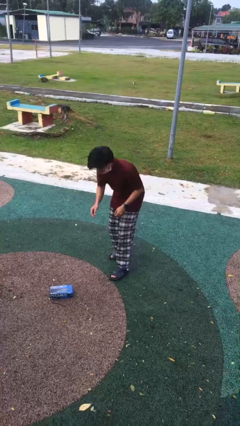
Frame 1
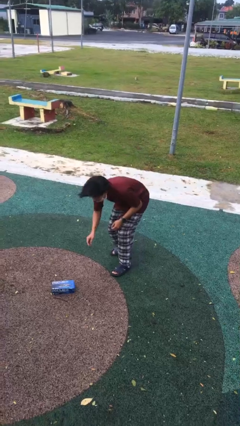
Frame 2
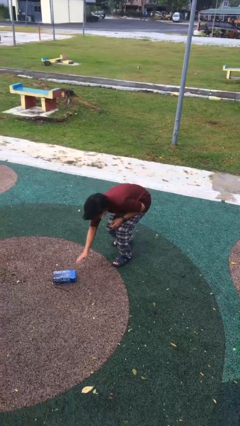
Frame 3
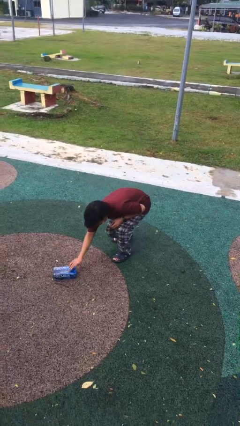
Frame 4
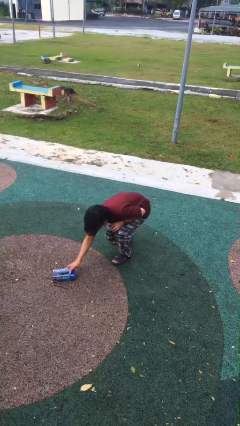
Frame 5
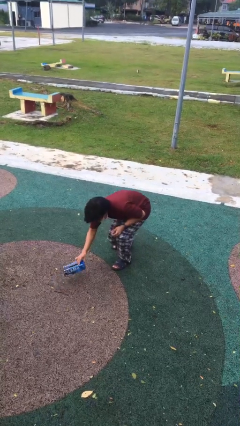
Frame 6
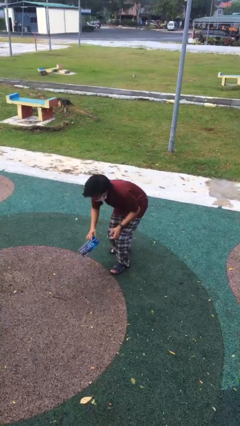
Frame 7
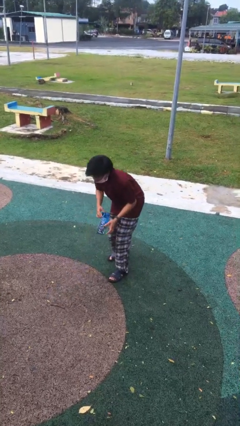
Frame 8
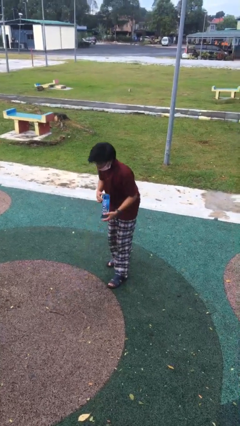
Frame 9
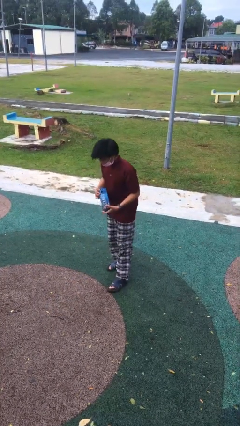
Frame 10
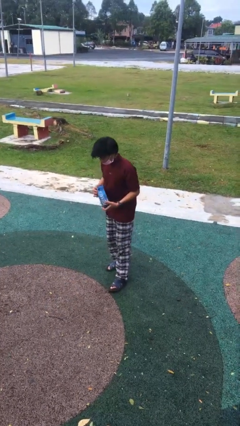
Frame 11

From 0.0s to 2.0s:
person picks up object from floor

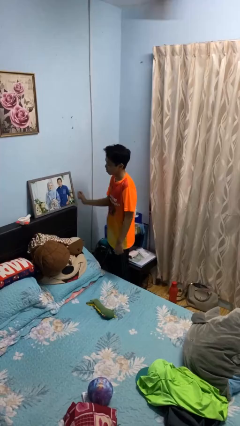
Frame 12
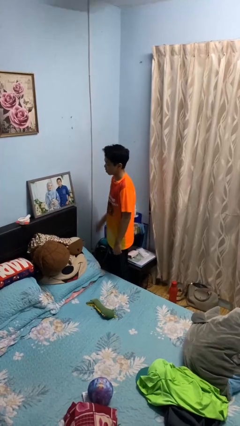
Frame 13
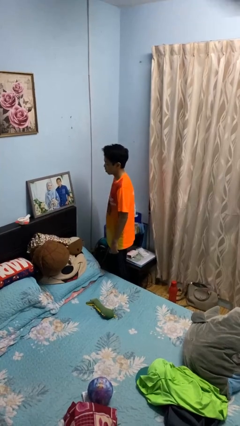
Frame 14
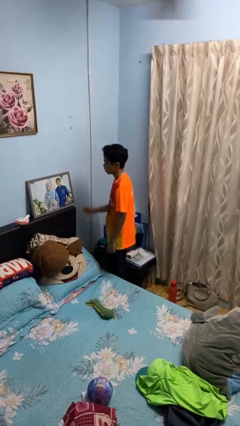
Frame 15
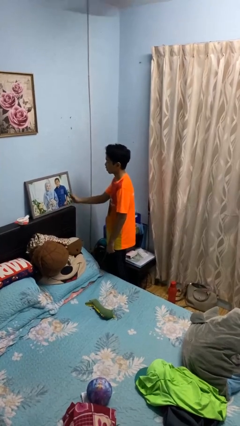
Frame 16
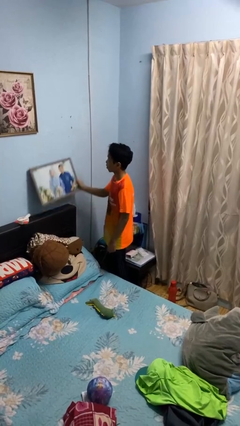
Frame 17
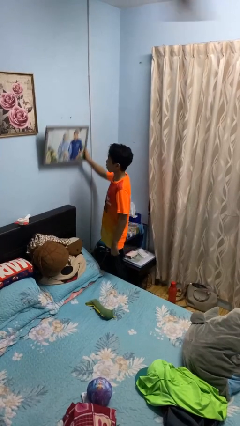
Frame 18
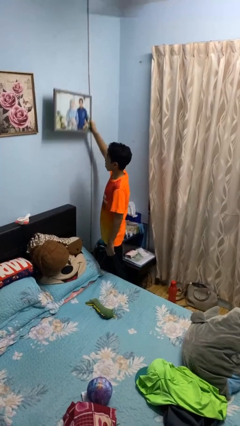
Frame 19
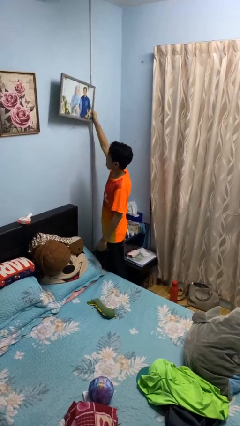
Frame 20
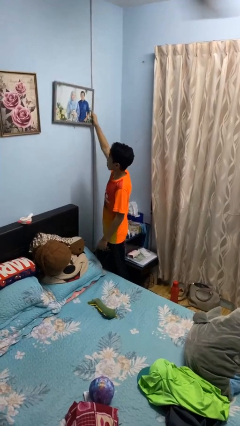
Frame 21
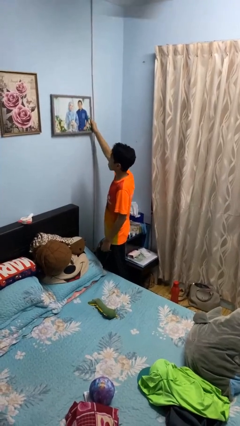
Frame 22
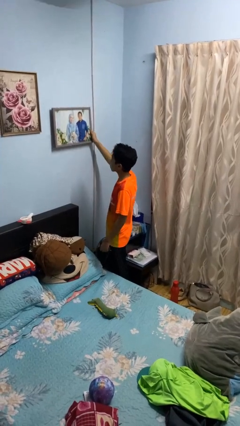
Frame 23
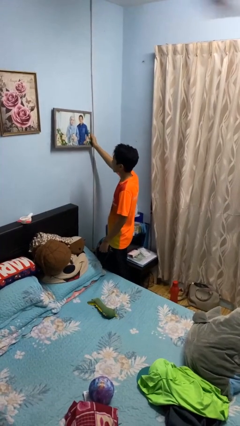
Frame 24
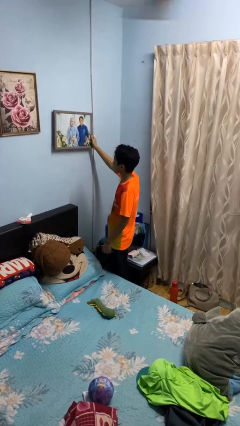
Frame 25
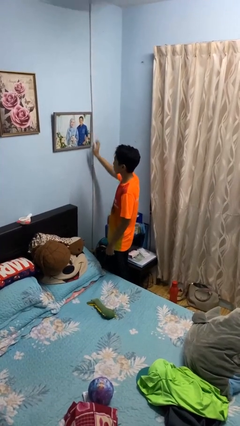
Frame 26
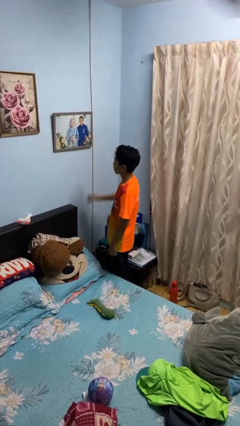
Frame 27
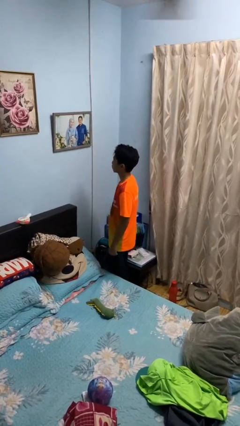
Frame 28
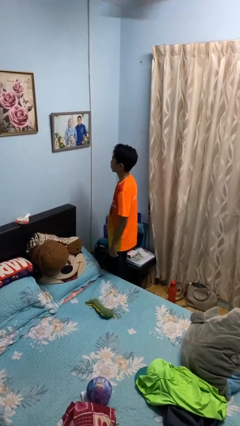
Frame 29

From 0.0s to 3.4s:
person puts up picture frame

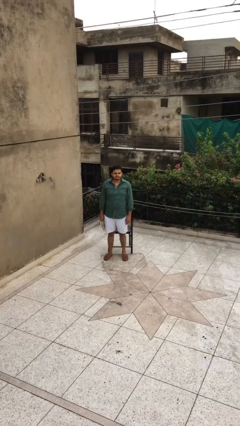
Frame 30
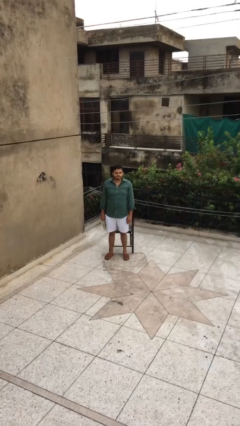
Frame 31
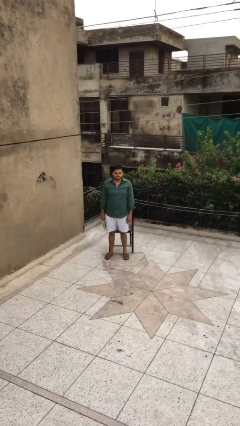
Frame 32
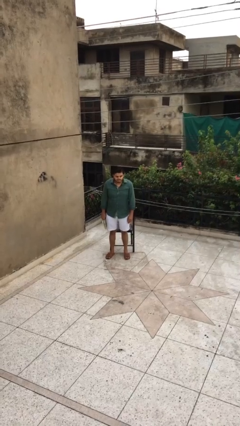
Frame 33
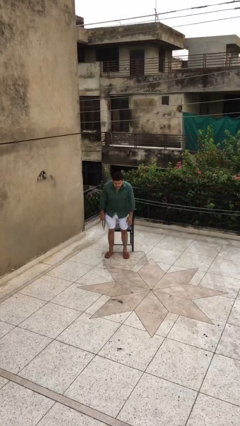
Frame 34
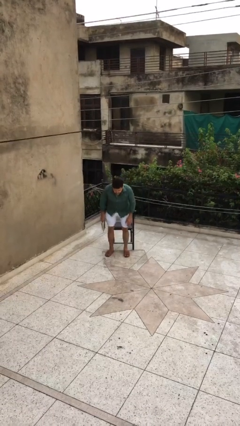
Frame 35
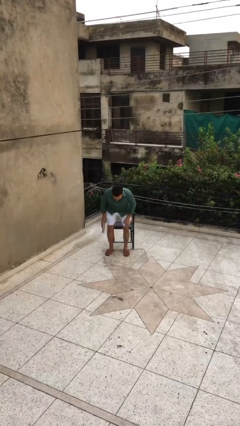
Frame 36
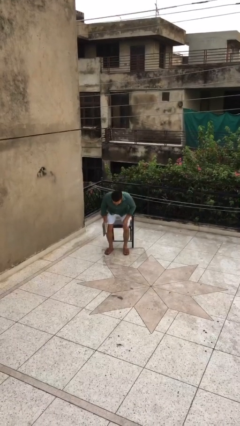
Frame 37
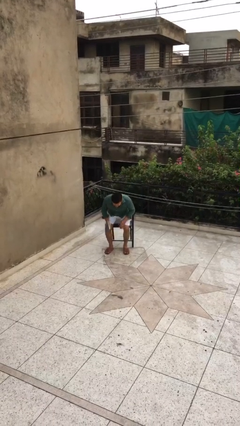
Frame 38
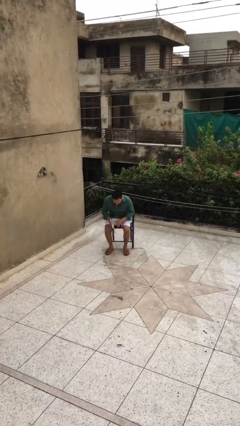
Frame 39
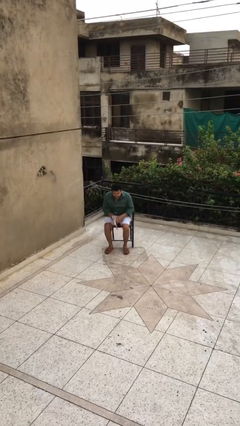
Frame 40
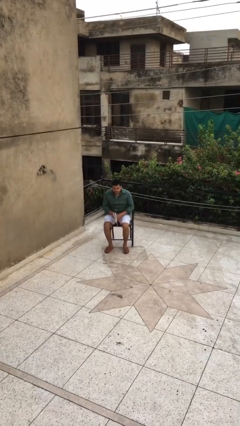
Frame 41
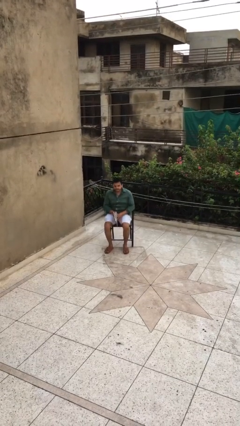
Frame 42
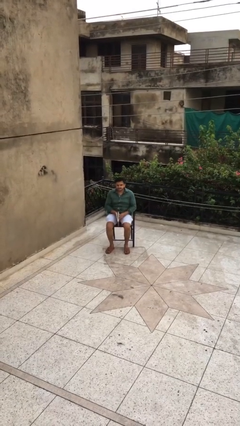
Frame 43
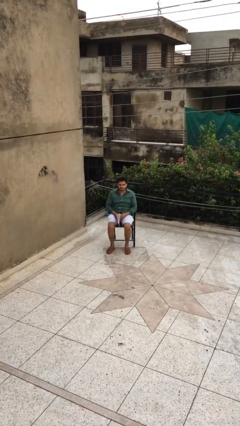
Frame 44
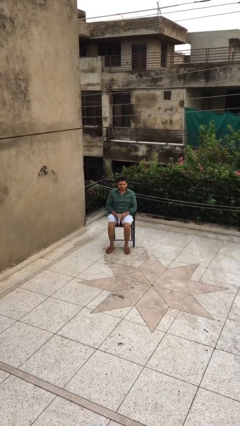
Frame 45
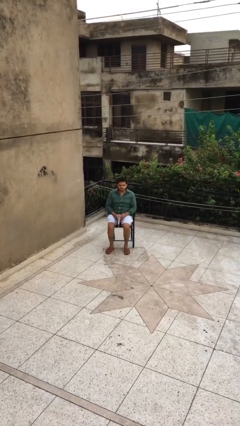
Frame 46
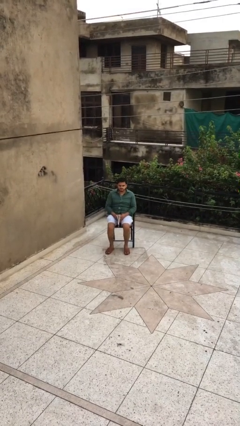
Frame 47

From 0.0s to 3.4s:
person sits down

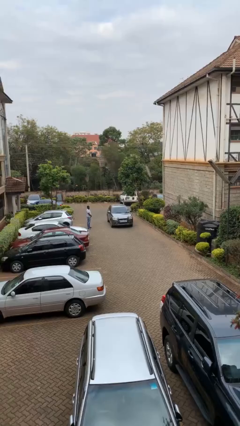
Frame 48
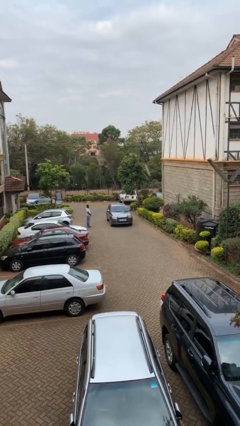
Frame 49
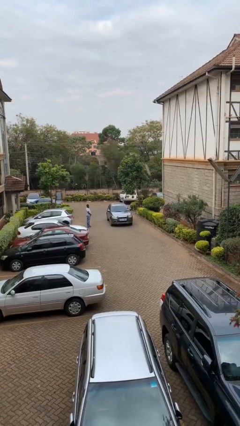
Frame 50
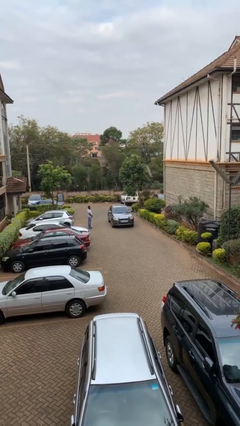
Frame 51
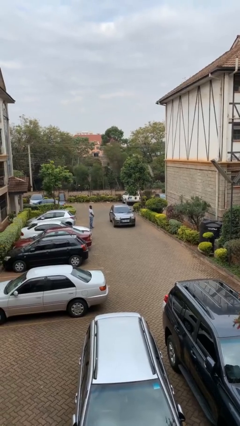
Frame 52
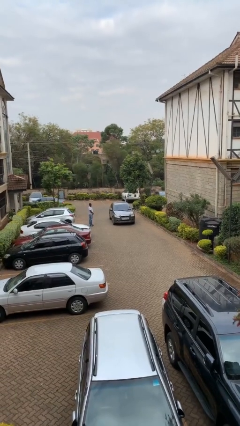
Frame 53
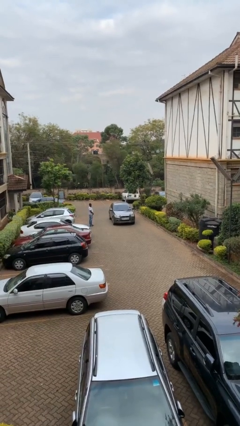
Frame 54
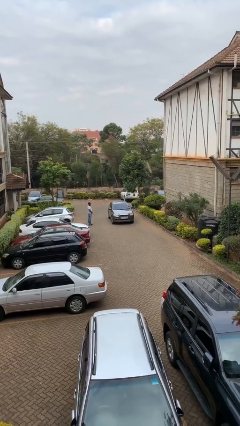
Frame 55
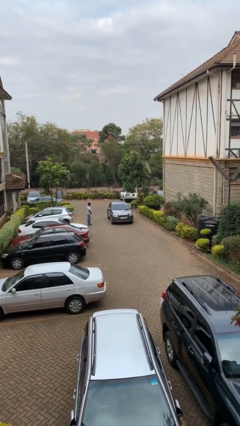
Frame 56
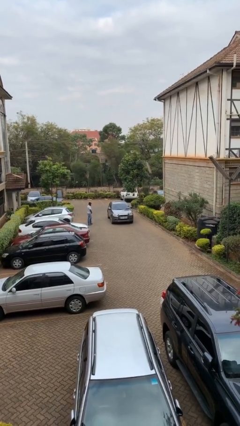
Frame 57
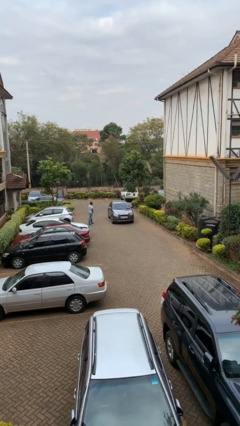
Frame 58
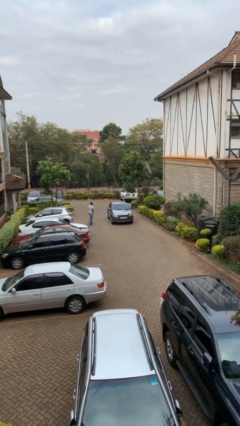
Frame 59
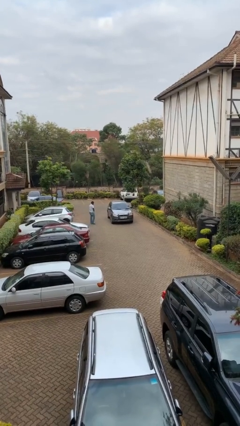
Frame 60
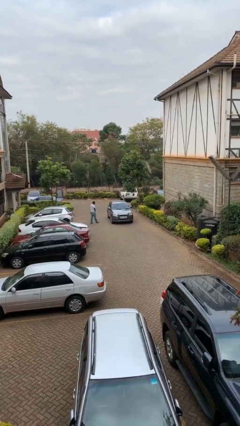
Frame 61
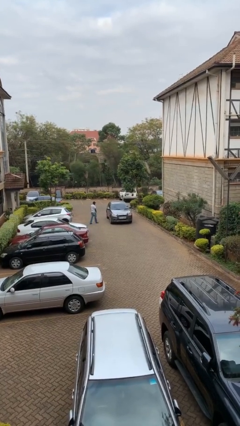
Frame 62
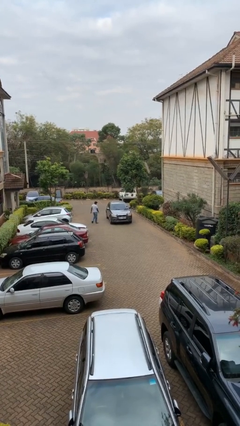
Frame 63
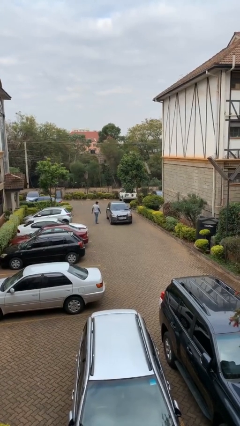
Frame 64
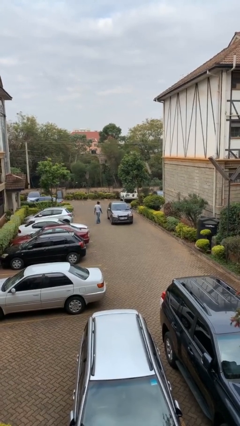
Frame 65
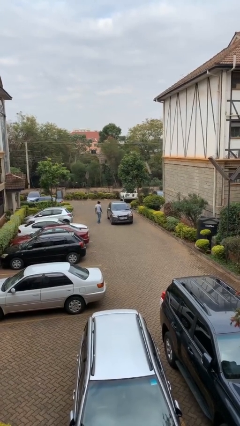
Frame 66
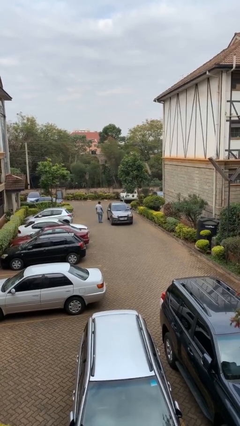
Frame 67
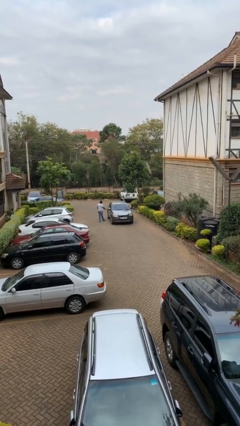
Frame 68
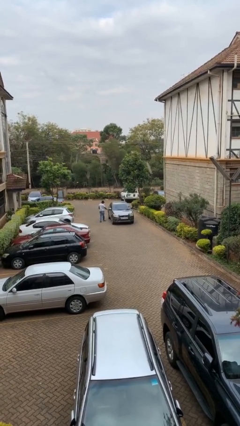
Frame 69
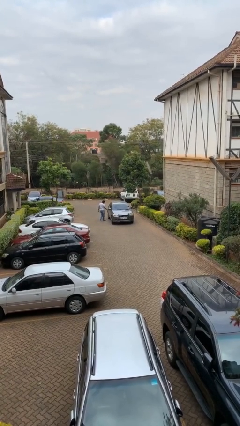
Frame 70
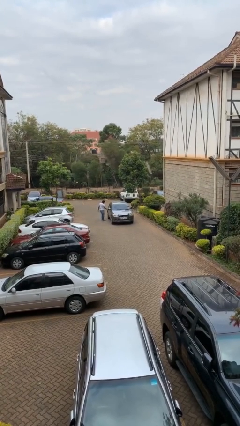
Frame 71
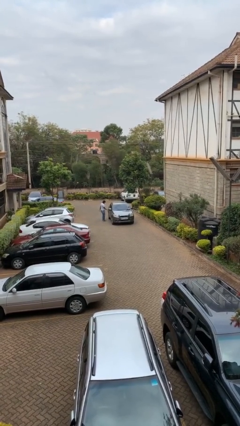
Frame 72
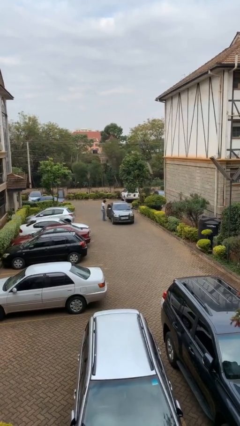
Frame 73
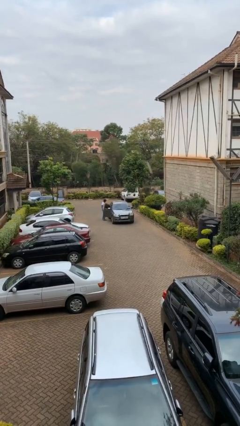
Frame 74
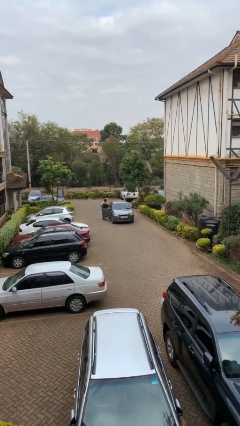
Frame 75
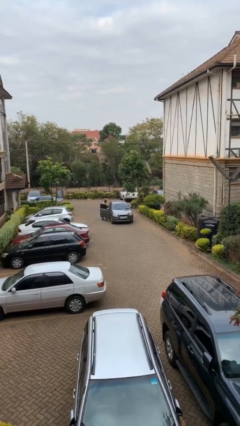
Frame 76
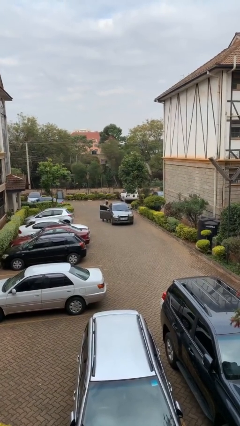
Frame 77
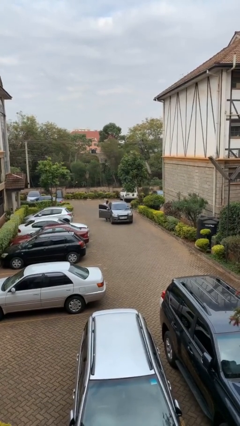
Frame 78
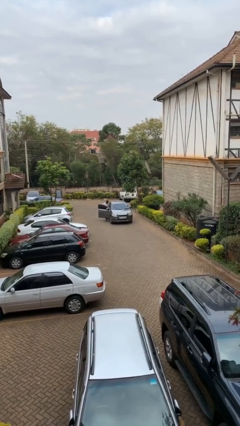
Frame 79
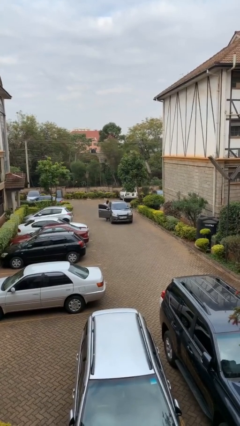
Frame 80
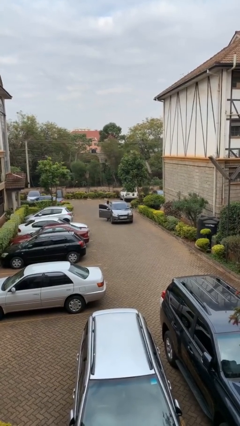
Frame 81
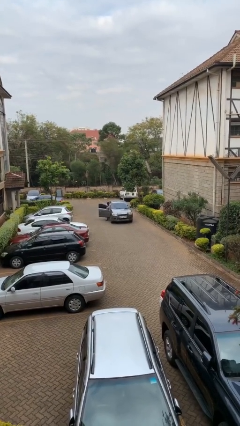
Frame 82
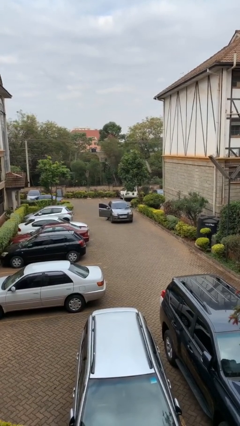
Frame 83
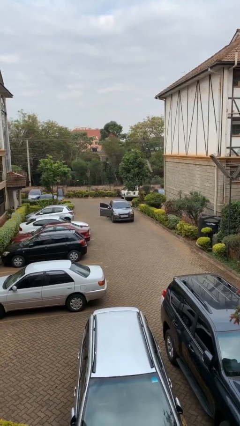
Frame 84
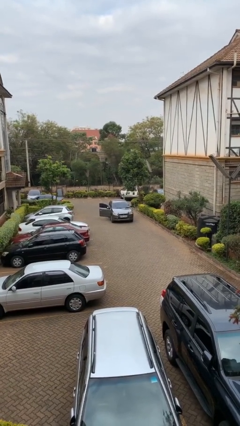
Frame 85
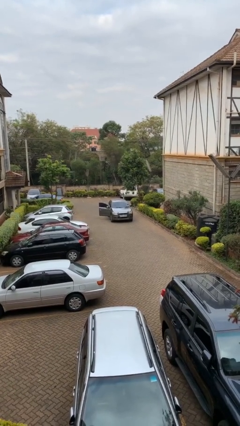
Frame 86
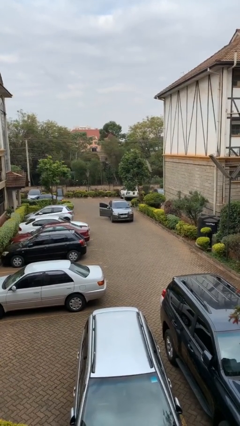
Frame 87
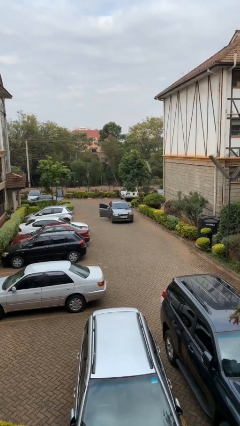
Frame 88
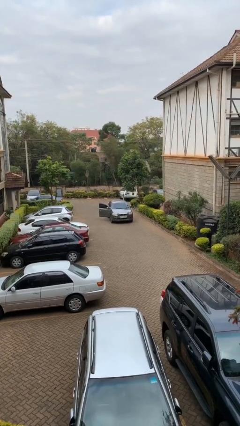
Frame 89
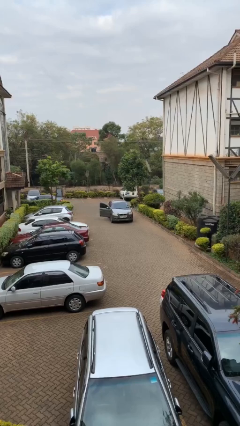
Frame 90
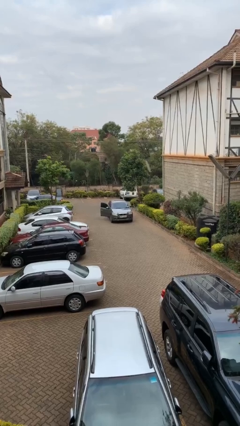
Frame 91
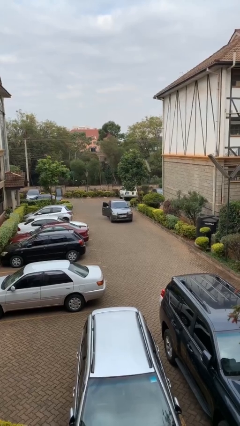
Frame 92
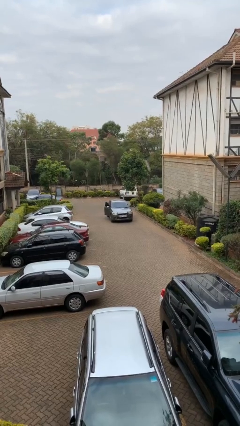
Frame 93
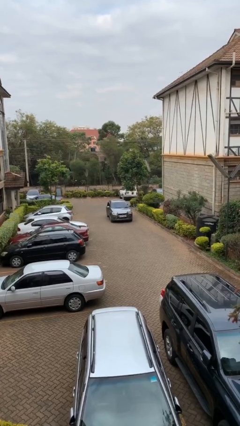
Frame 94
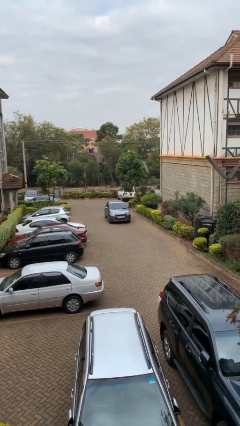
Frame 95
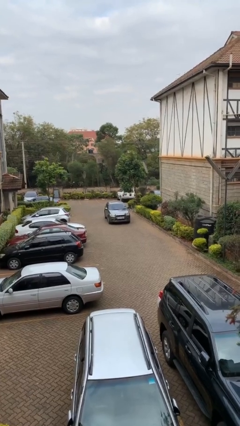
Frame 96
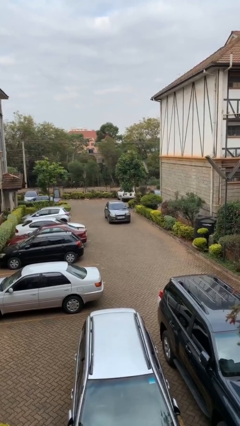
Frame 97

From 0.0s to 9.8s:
car picks up person
